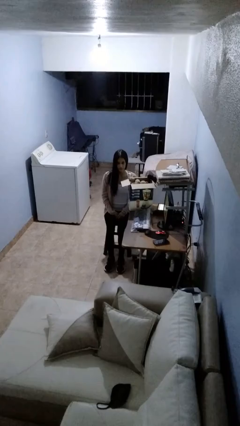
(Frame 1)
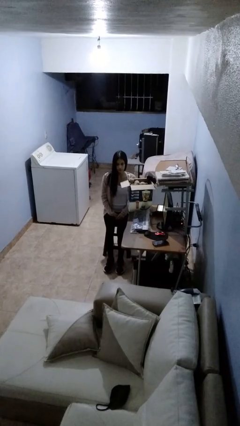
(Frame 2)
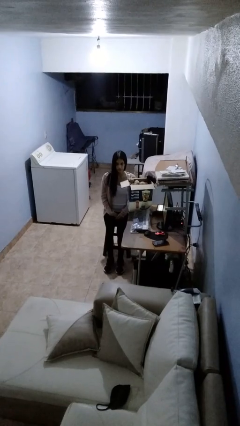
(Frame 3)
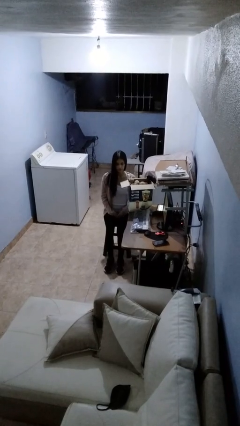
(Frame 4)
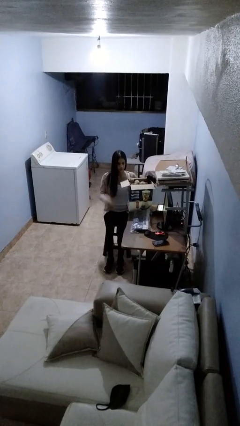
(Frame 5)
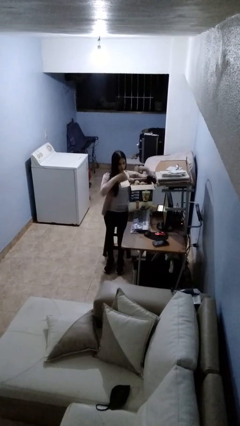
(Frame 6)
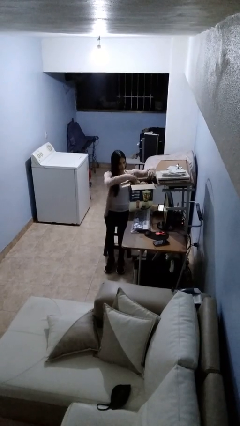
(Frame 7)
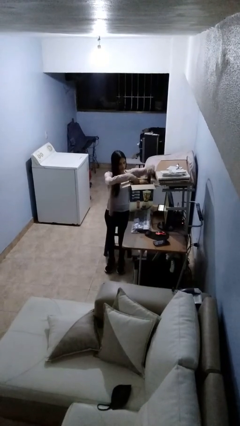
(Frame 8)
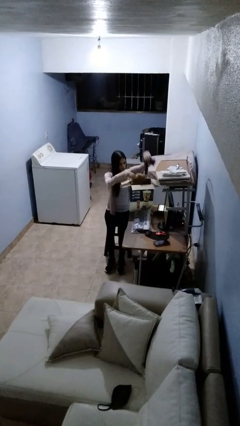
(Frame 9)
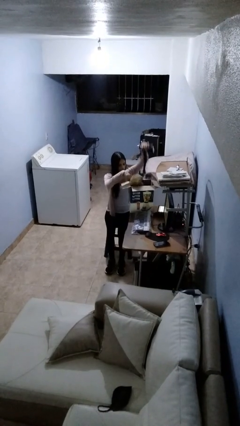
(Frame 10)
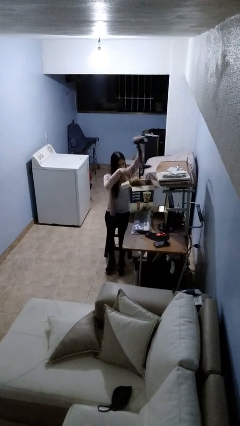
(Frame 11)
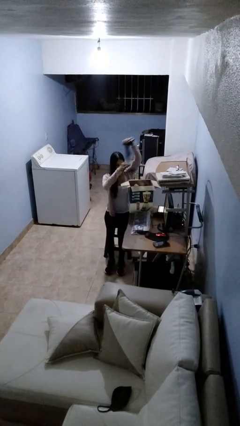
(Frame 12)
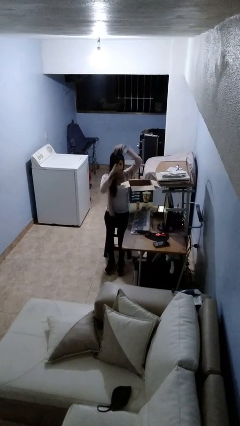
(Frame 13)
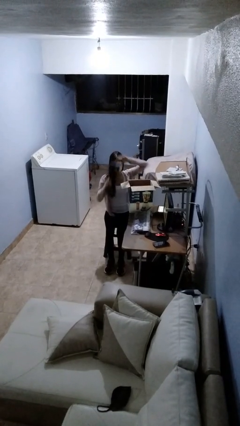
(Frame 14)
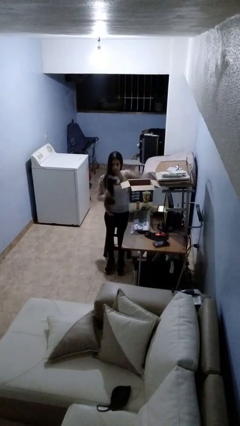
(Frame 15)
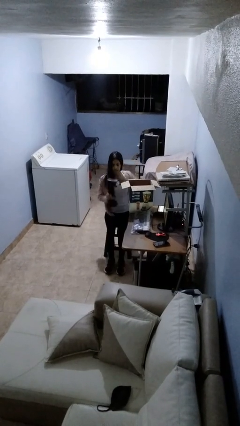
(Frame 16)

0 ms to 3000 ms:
person takes object from box

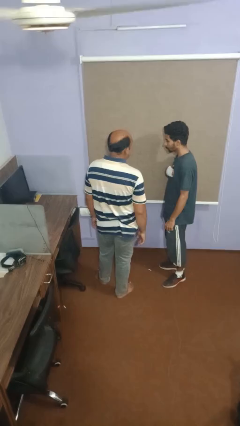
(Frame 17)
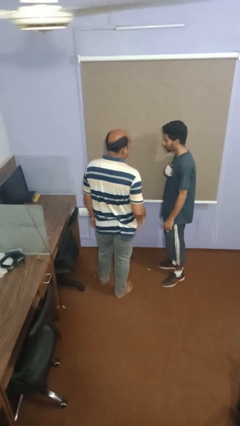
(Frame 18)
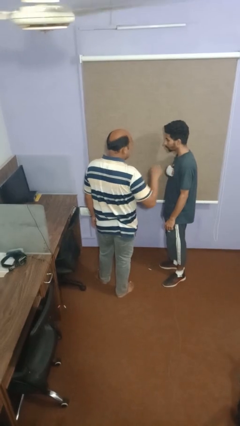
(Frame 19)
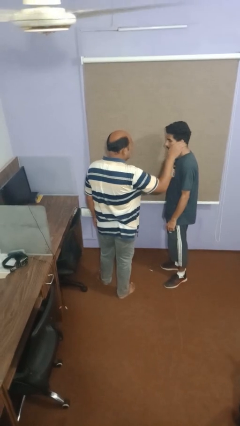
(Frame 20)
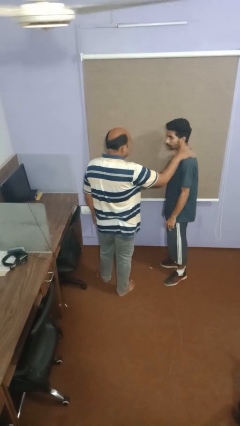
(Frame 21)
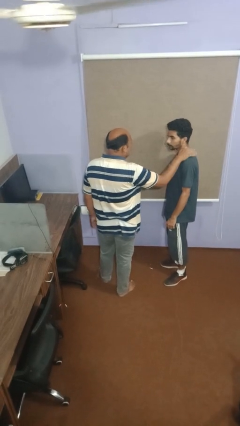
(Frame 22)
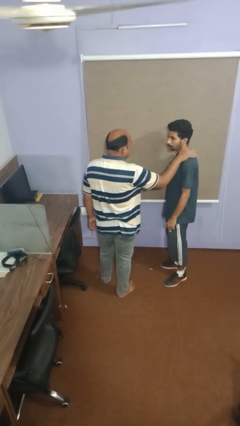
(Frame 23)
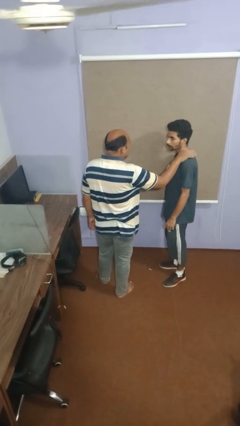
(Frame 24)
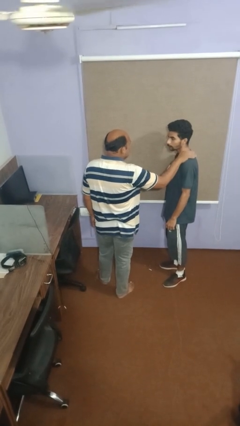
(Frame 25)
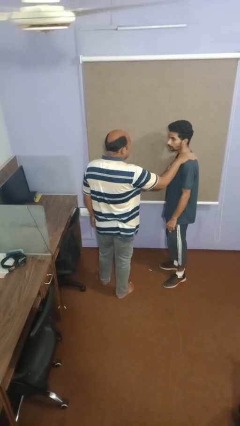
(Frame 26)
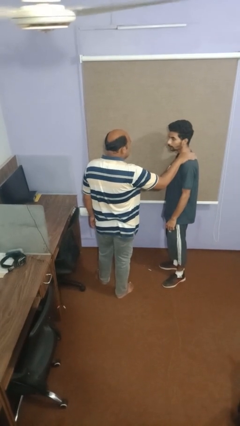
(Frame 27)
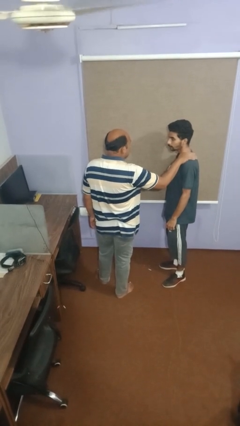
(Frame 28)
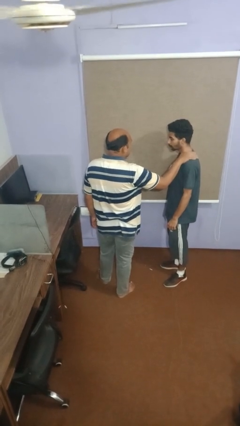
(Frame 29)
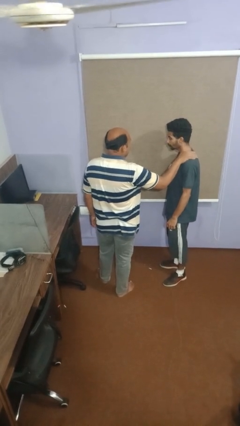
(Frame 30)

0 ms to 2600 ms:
person pounds shoulders of person

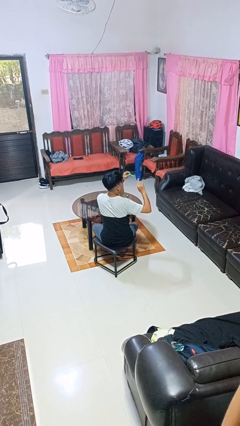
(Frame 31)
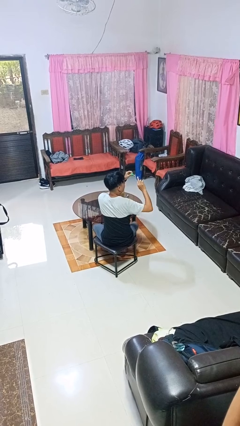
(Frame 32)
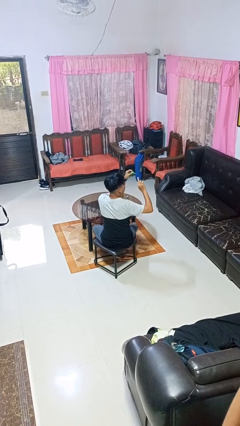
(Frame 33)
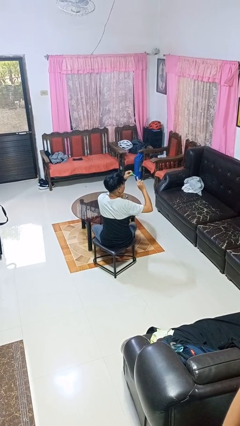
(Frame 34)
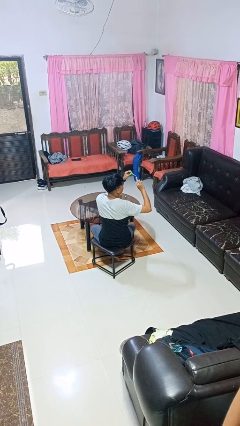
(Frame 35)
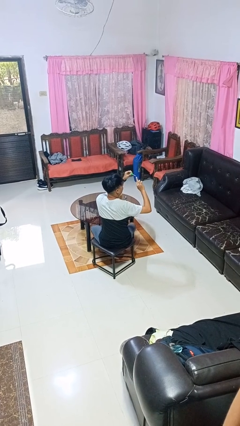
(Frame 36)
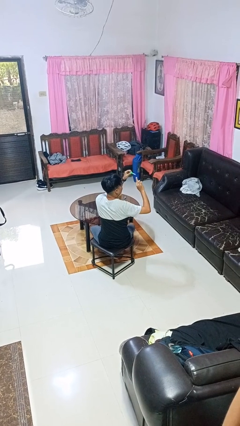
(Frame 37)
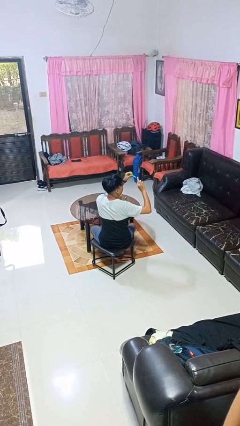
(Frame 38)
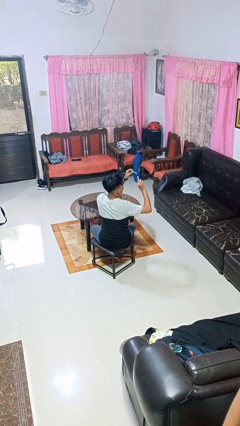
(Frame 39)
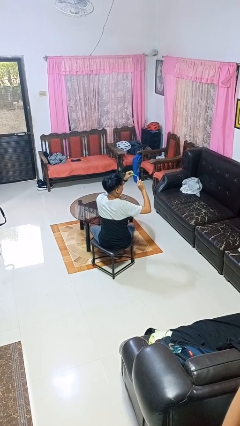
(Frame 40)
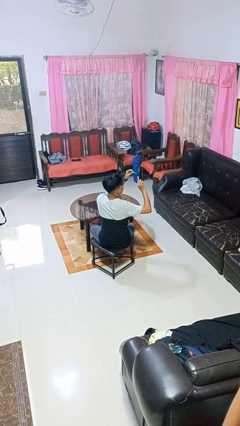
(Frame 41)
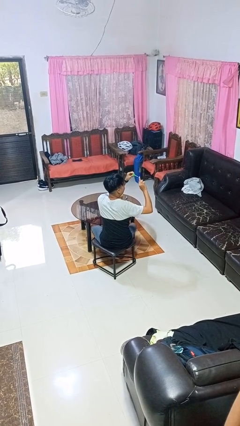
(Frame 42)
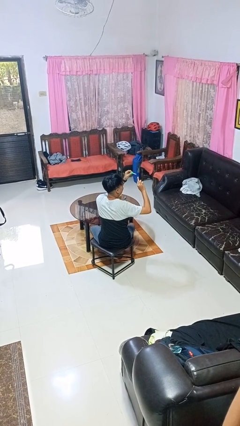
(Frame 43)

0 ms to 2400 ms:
person paints fingernails

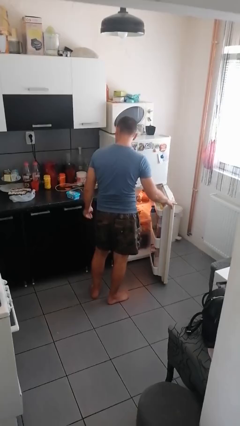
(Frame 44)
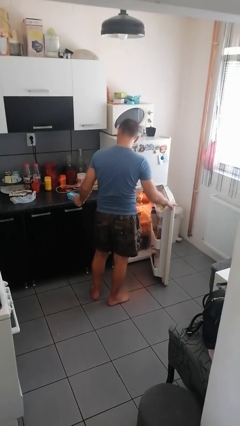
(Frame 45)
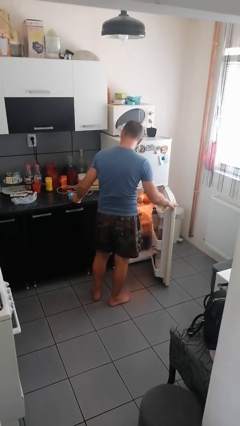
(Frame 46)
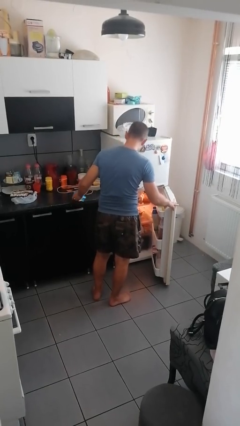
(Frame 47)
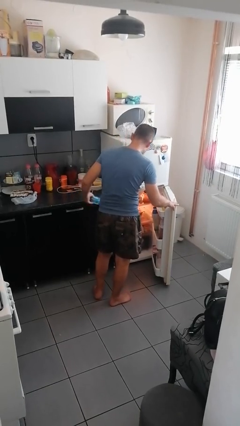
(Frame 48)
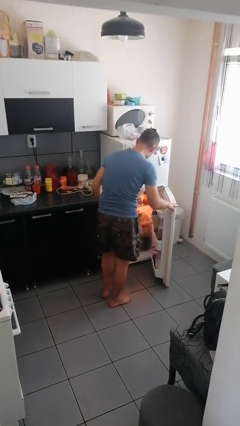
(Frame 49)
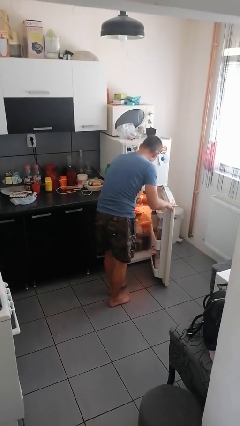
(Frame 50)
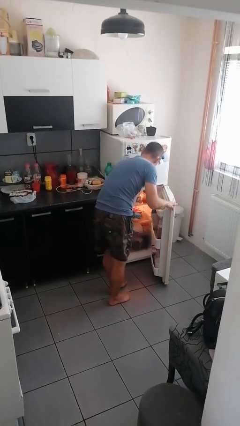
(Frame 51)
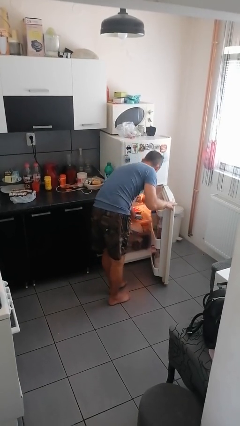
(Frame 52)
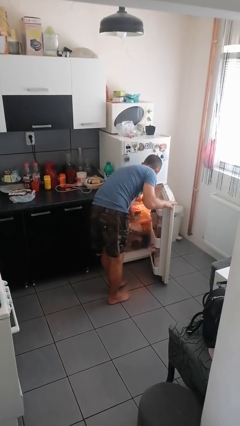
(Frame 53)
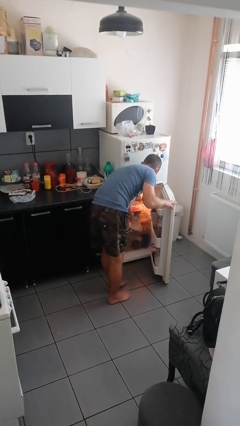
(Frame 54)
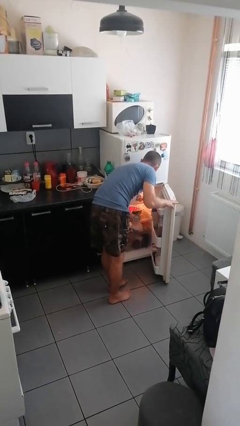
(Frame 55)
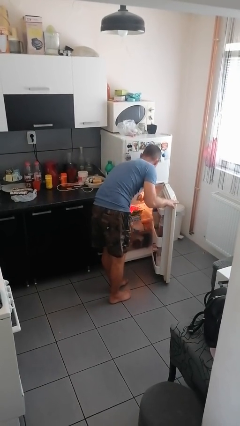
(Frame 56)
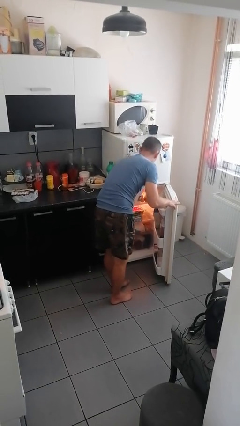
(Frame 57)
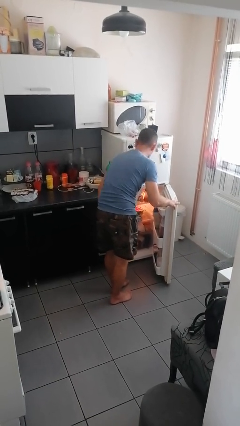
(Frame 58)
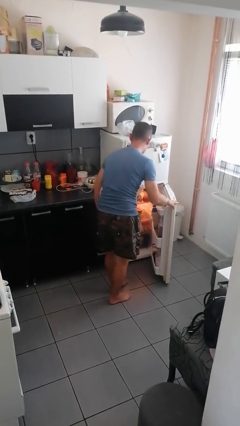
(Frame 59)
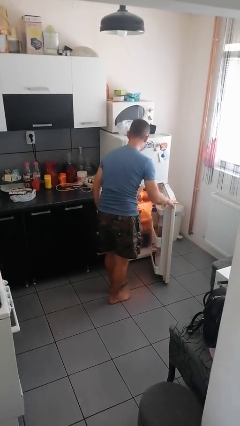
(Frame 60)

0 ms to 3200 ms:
person loads groceries into refrigerator

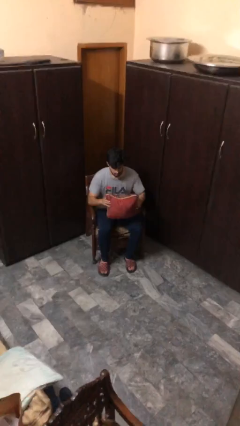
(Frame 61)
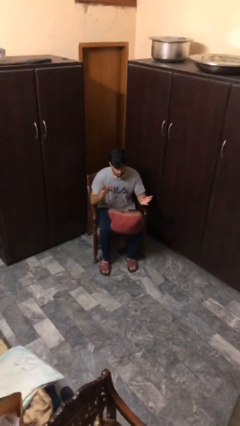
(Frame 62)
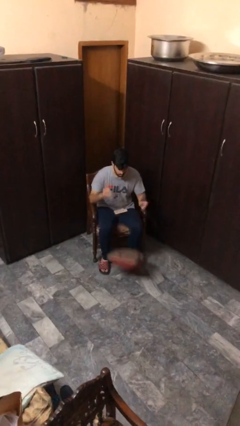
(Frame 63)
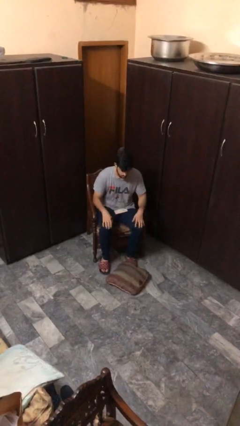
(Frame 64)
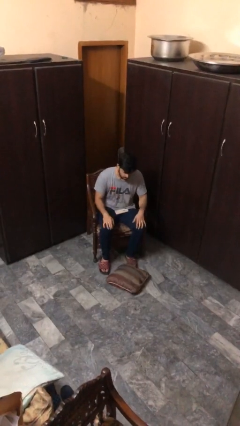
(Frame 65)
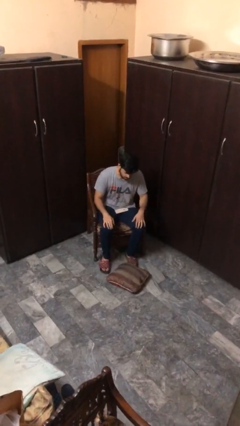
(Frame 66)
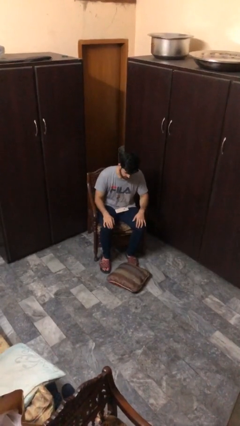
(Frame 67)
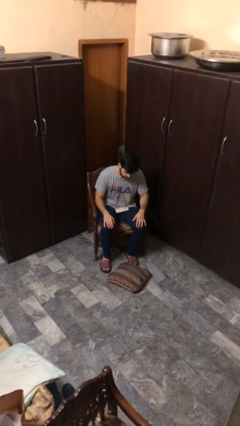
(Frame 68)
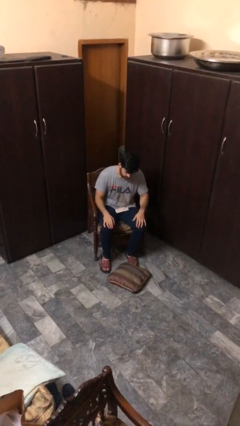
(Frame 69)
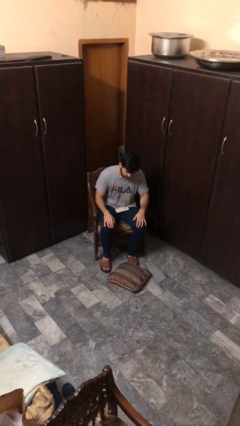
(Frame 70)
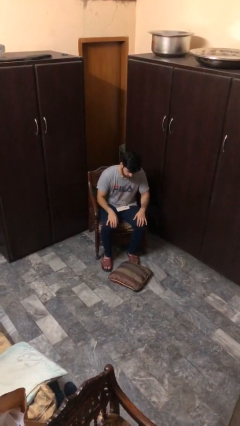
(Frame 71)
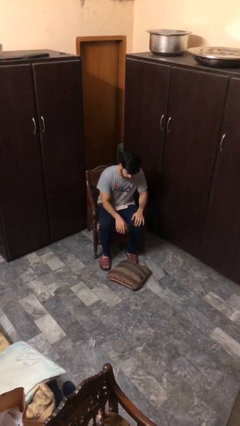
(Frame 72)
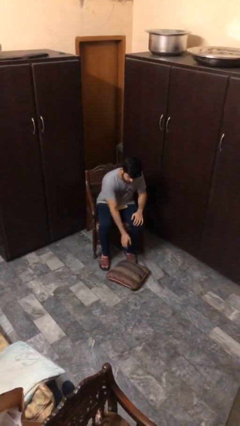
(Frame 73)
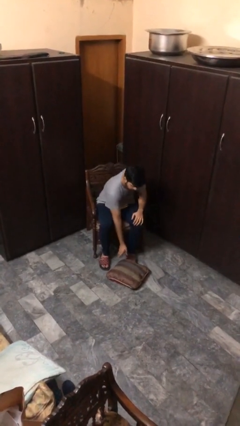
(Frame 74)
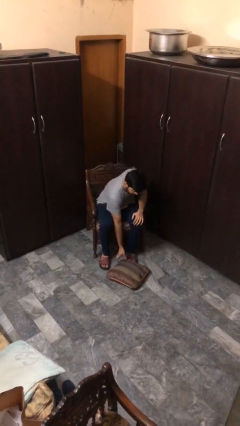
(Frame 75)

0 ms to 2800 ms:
person drops object

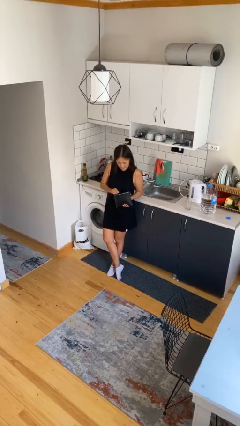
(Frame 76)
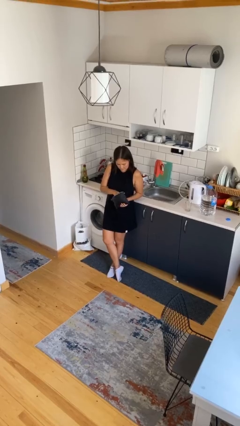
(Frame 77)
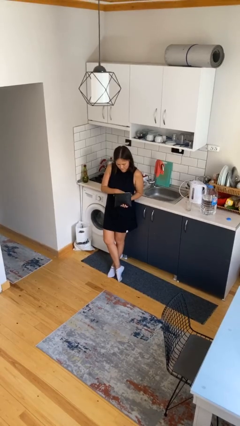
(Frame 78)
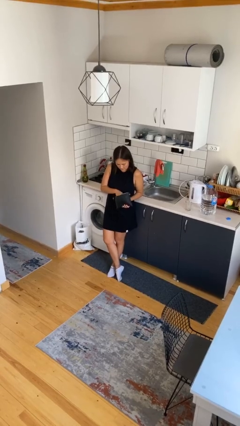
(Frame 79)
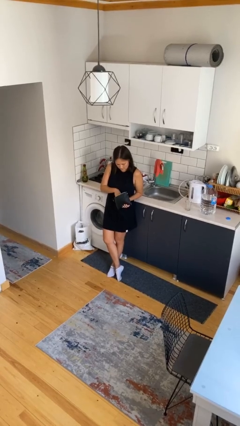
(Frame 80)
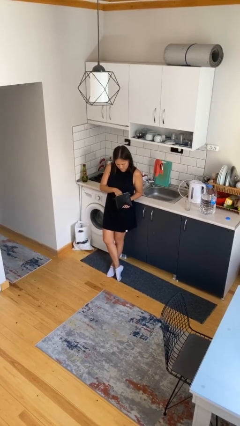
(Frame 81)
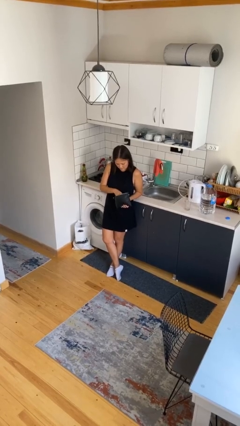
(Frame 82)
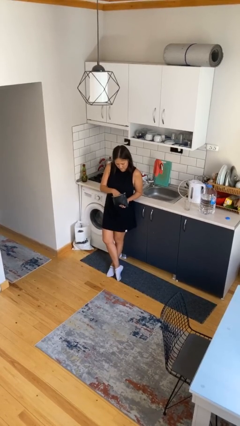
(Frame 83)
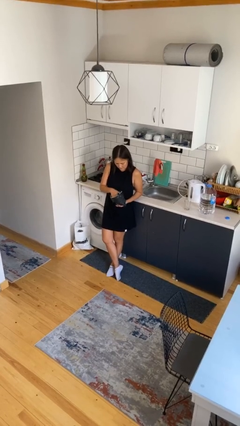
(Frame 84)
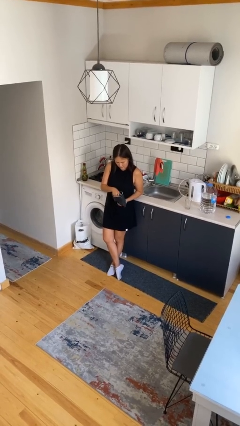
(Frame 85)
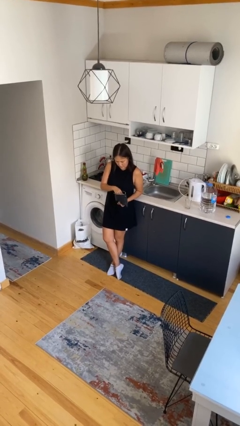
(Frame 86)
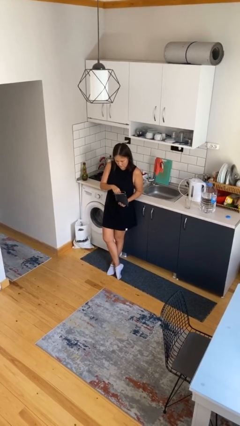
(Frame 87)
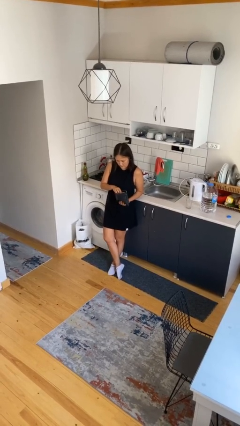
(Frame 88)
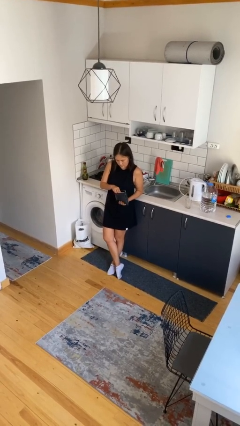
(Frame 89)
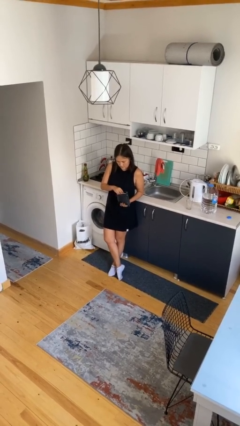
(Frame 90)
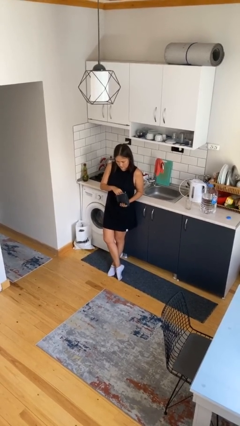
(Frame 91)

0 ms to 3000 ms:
person searches in purse

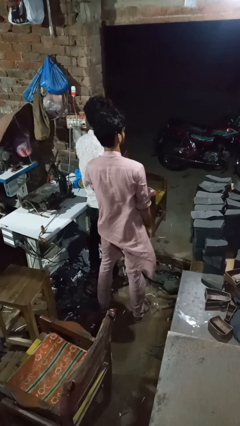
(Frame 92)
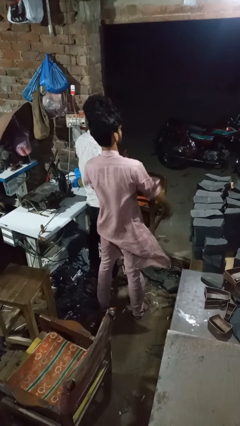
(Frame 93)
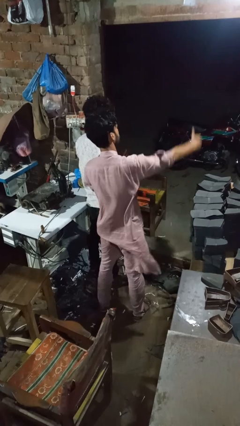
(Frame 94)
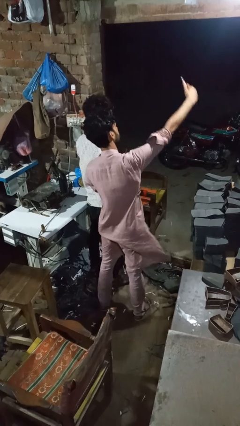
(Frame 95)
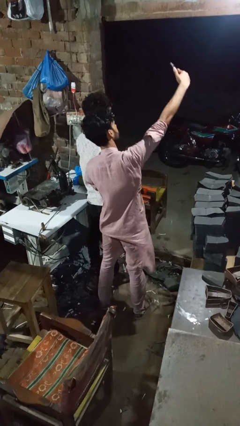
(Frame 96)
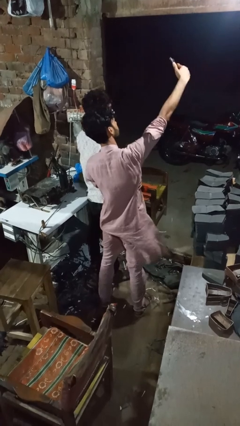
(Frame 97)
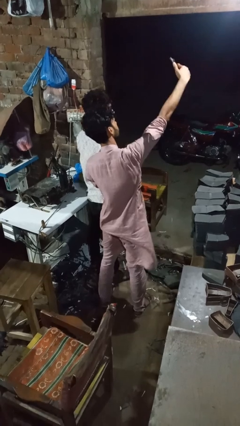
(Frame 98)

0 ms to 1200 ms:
person tickles person
